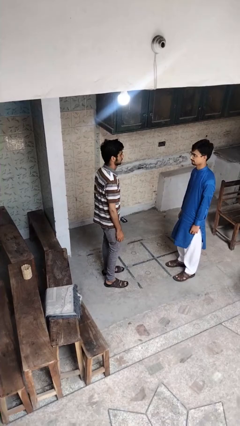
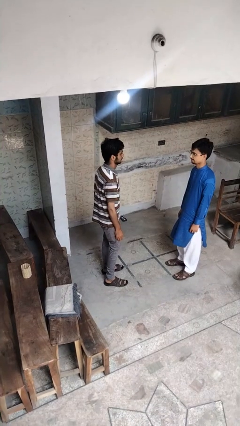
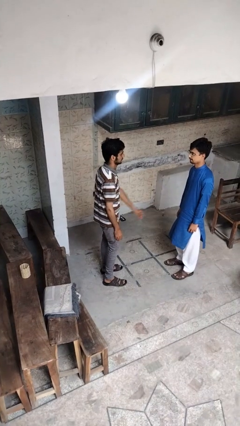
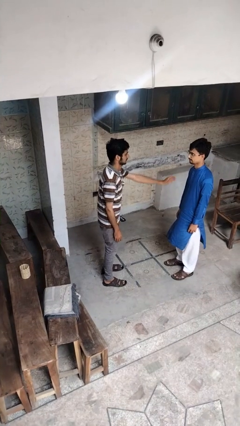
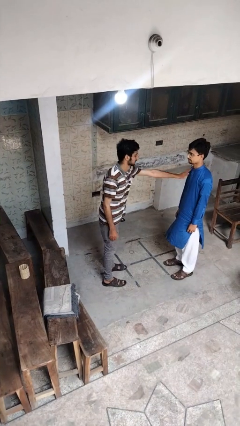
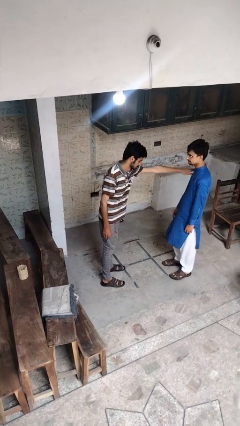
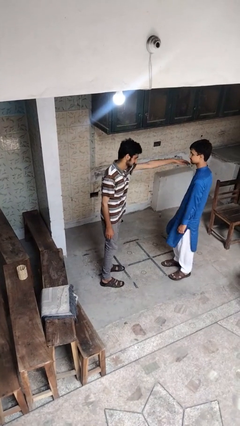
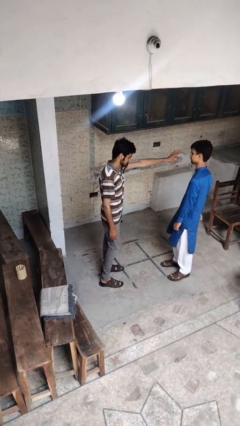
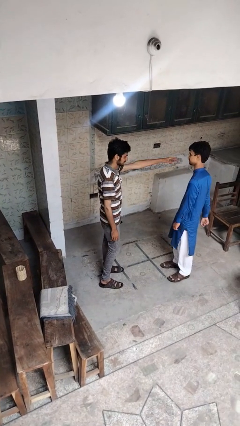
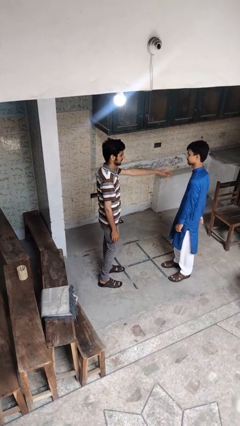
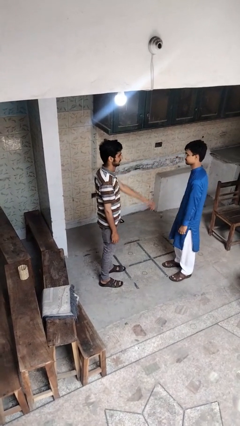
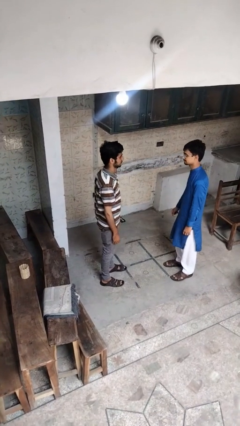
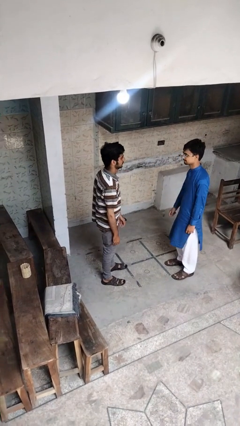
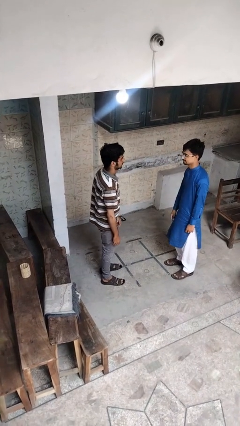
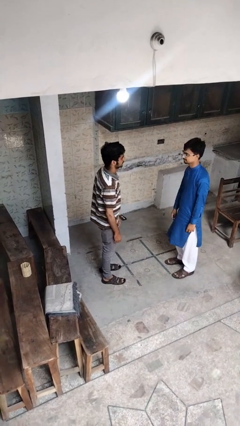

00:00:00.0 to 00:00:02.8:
person shoves person

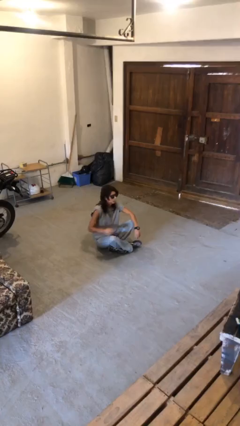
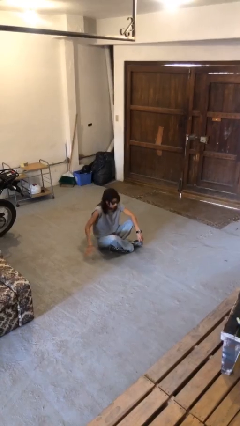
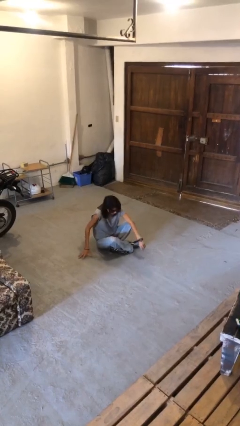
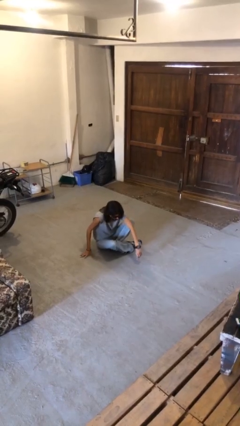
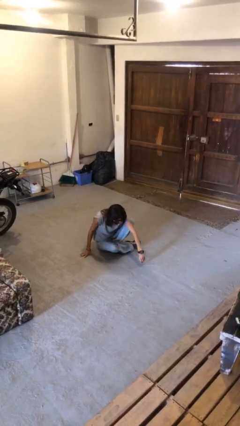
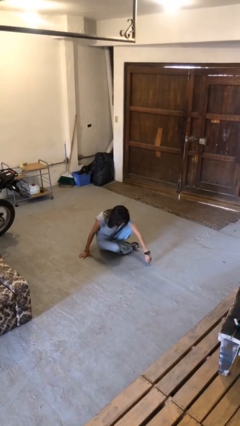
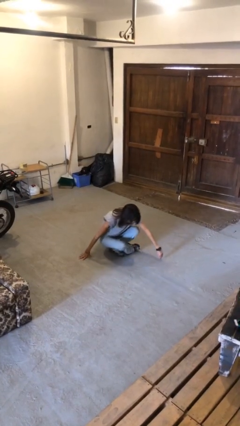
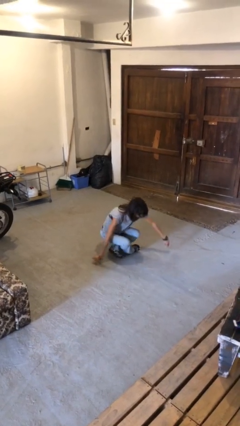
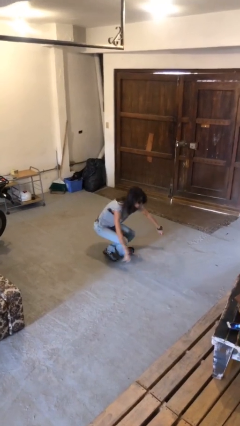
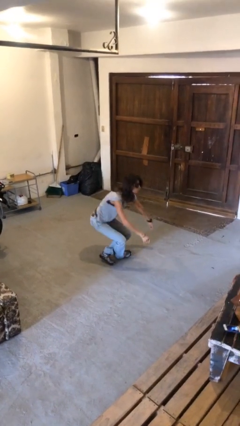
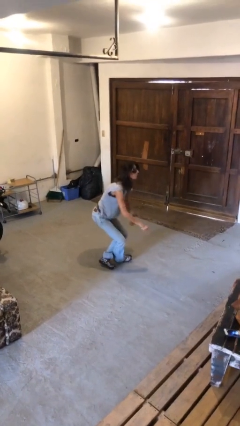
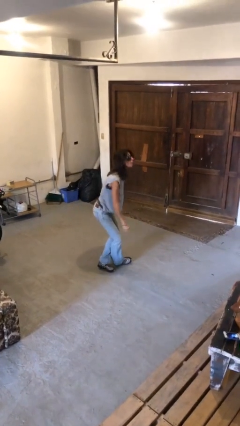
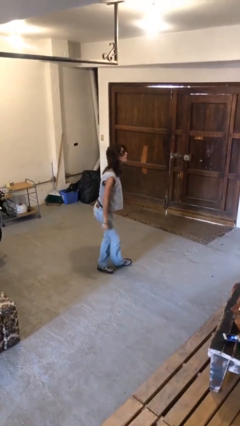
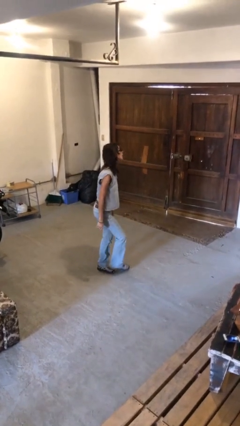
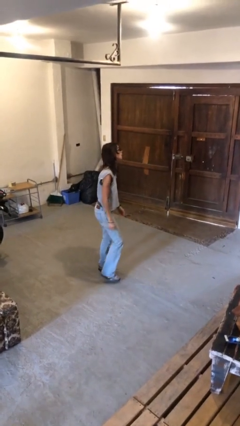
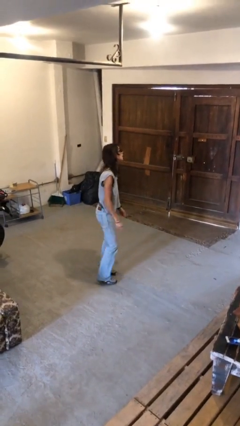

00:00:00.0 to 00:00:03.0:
person stands up from floor

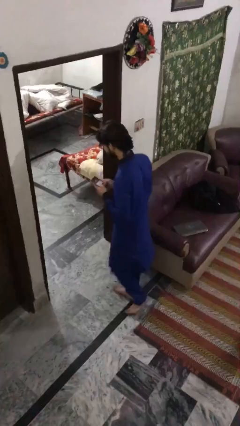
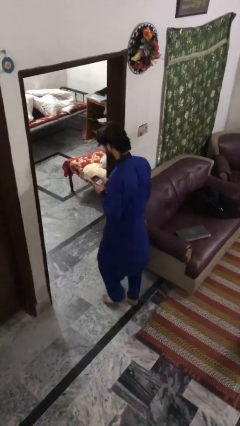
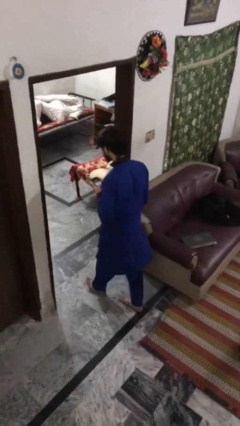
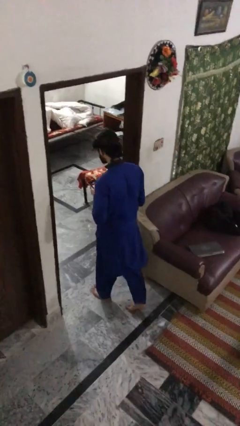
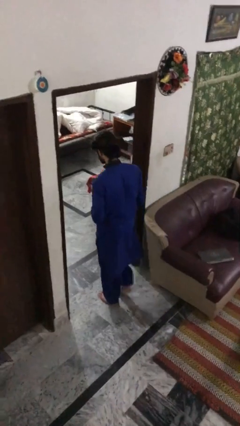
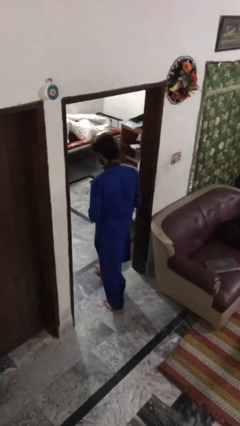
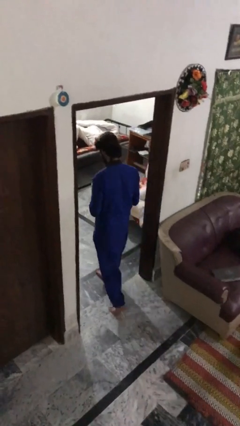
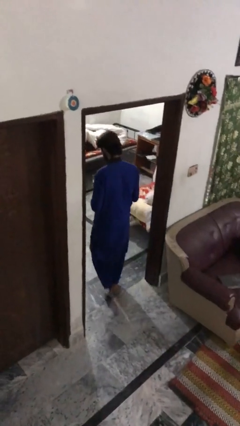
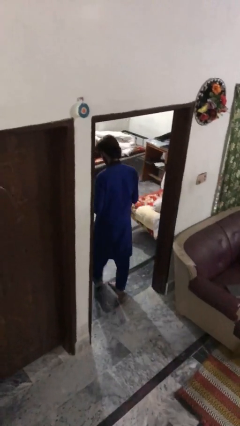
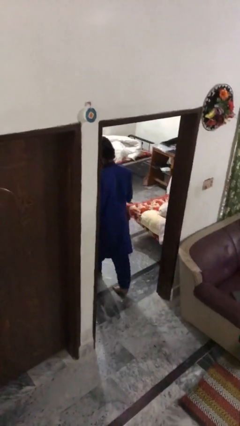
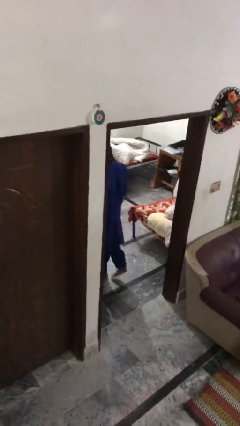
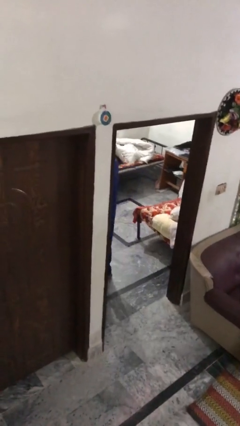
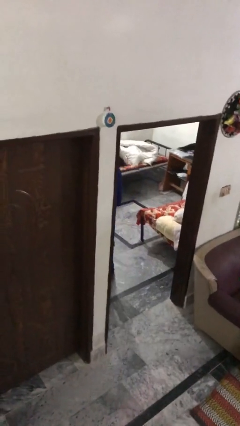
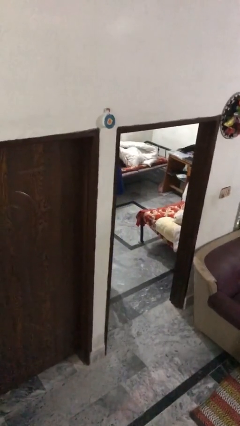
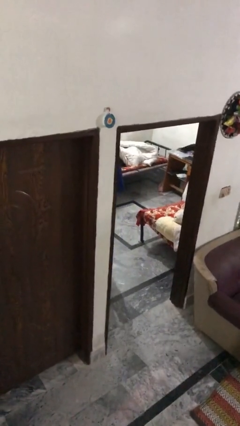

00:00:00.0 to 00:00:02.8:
person exits scene through structure

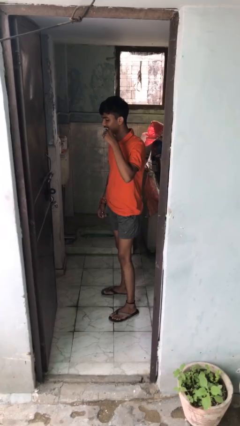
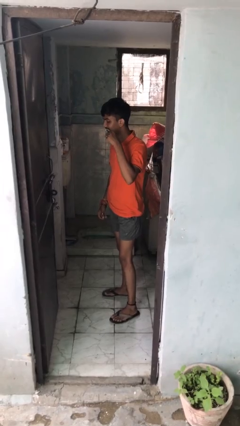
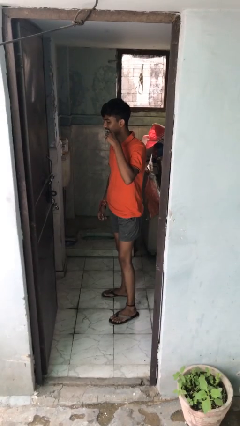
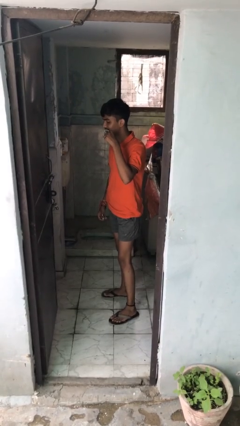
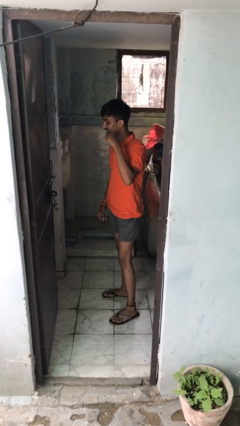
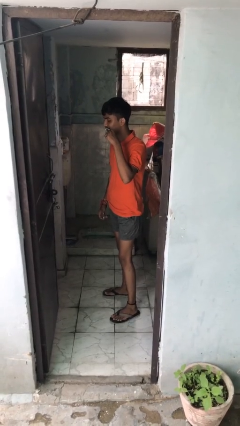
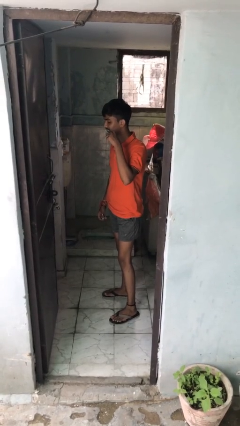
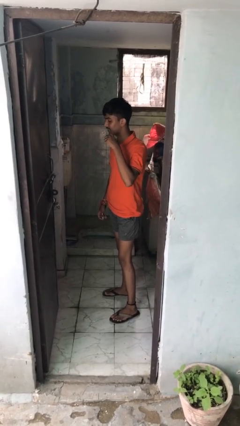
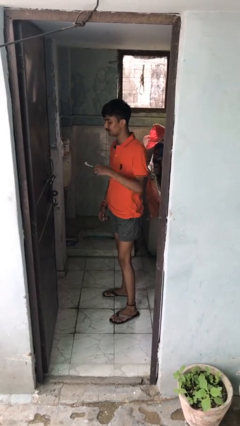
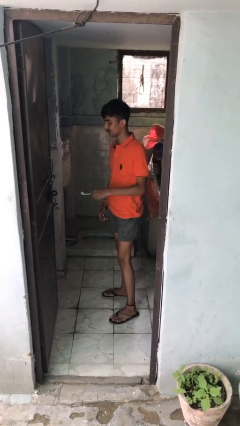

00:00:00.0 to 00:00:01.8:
person brushes teeth

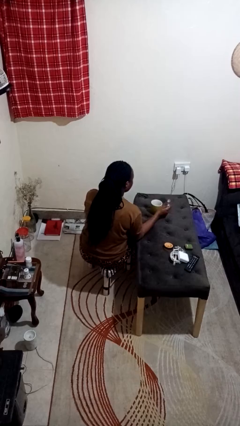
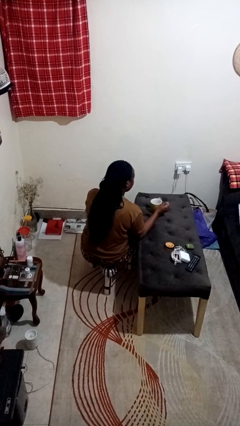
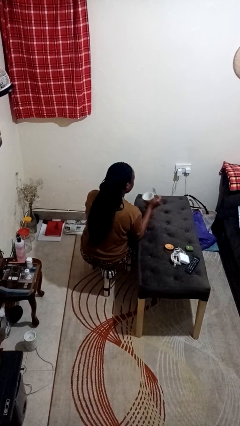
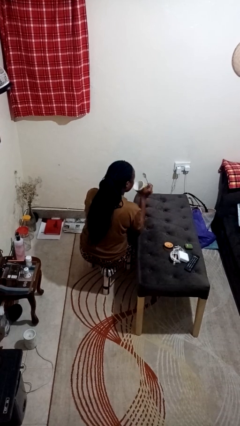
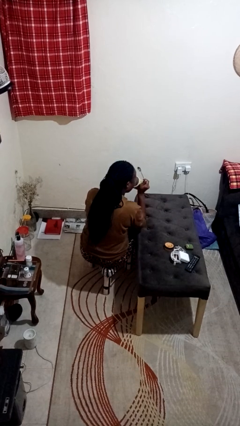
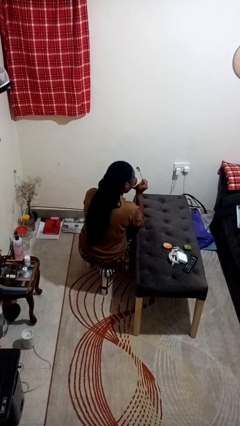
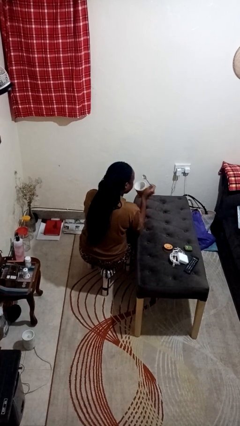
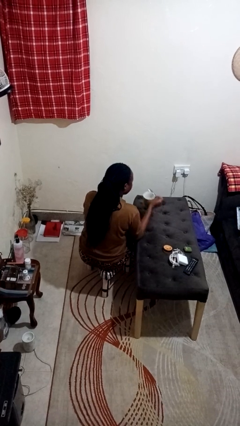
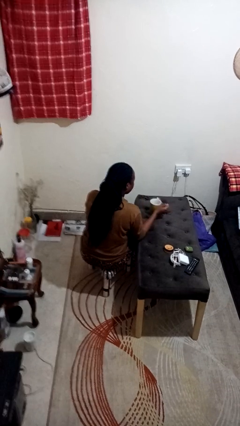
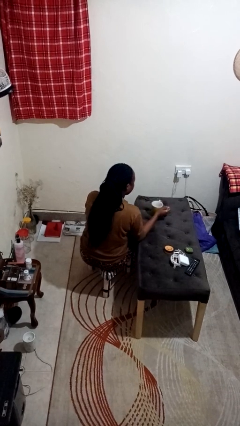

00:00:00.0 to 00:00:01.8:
person drinks from mug

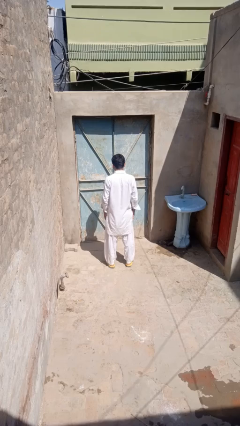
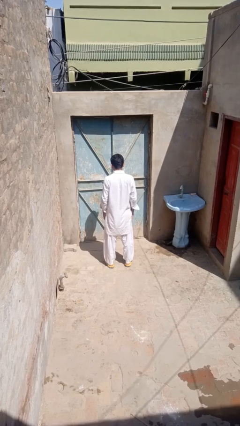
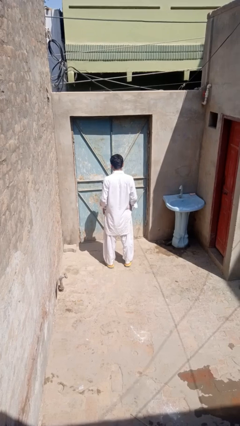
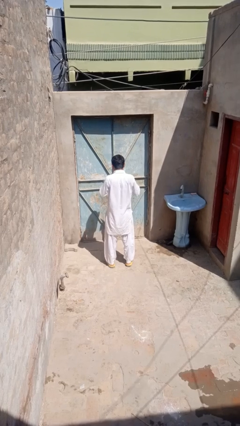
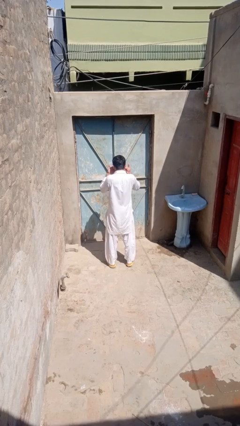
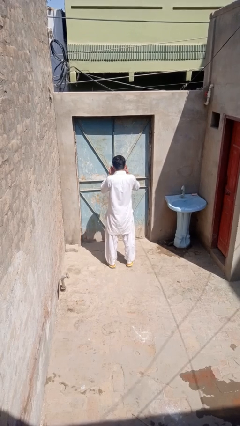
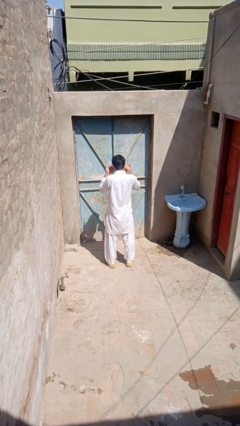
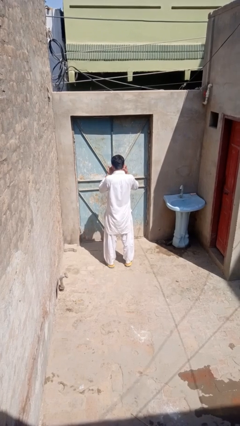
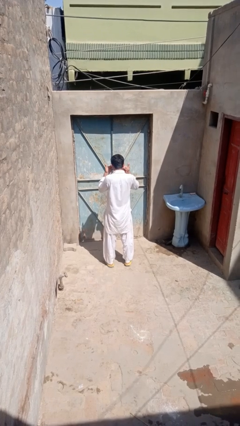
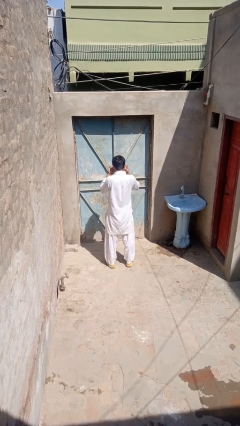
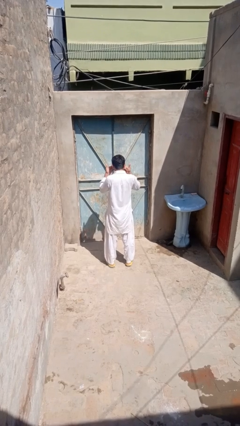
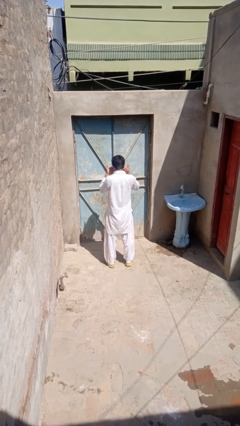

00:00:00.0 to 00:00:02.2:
person rubs eyes

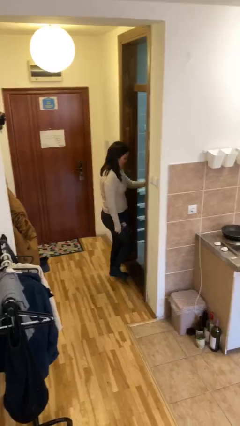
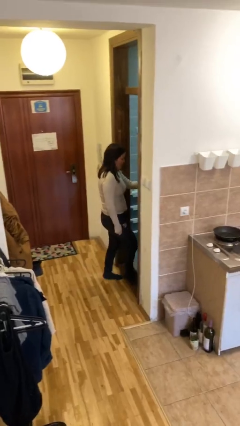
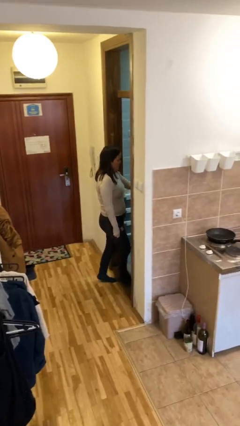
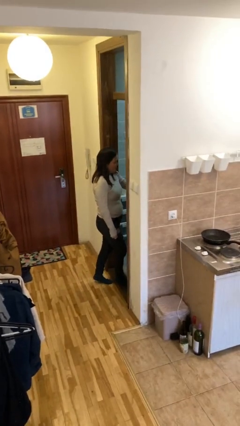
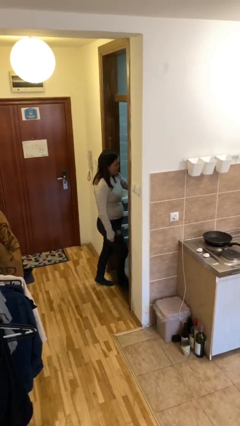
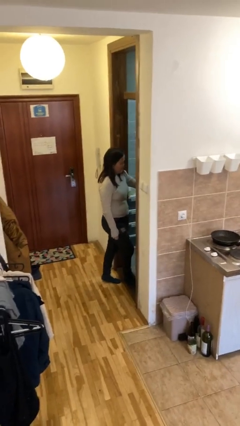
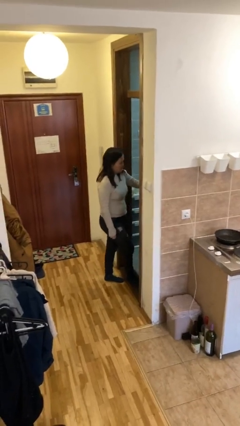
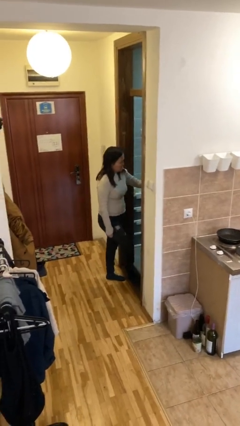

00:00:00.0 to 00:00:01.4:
person opens facility door

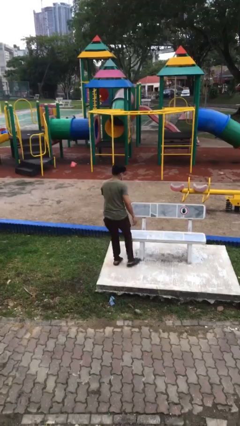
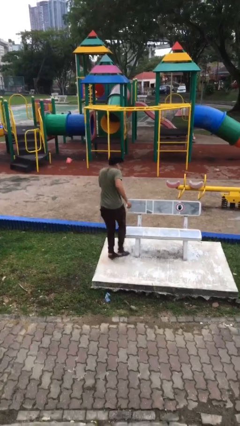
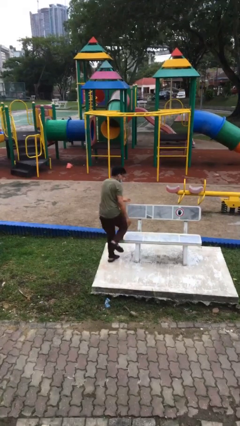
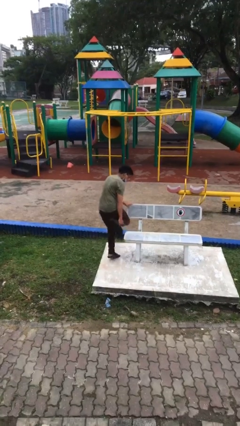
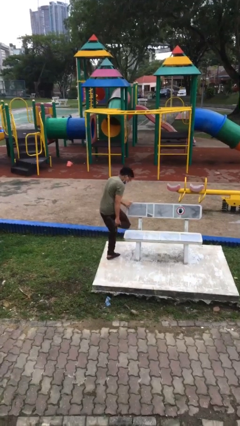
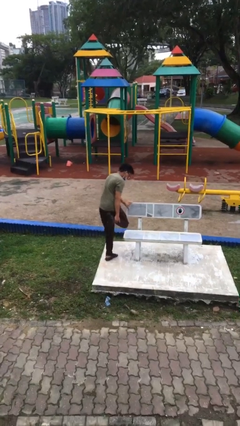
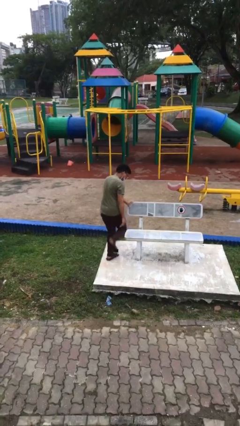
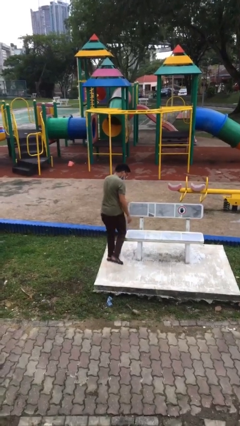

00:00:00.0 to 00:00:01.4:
person stubs toe
